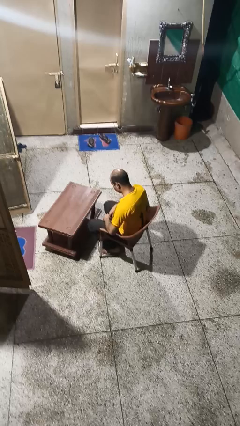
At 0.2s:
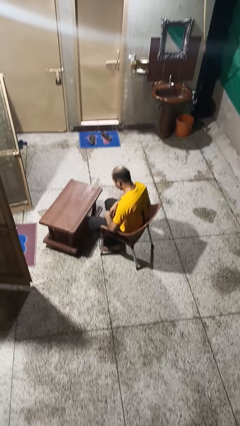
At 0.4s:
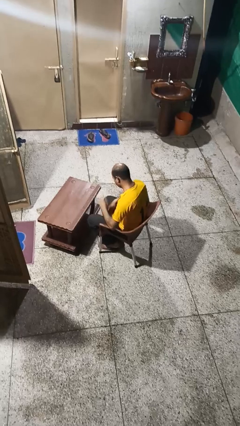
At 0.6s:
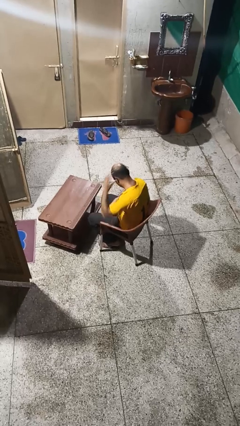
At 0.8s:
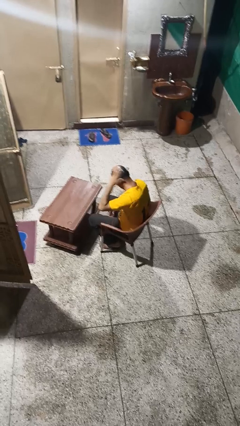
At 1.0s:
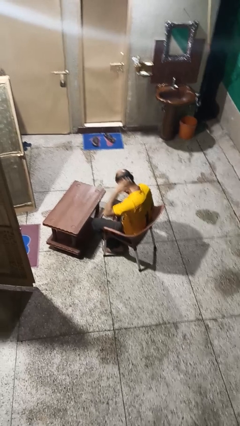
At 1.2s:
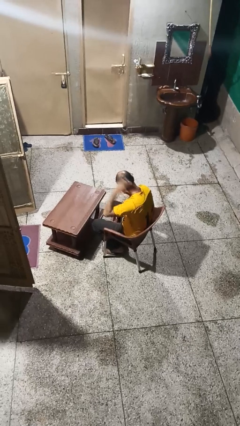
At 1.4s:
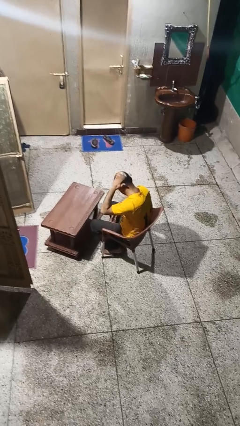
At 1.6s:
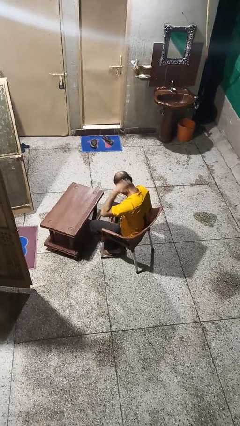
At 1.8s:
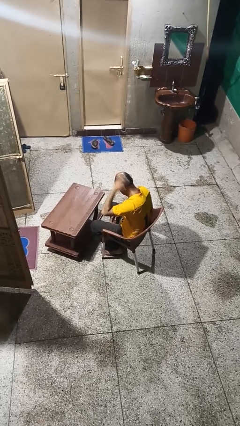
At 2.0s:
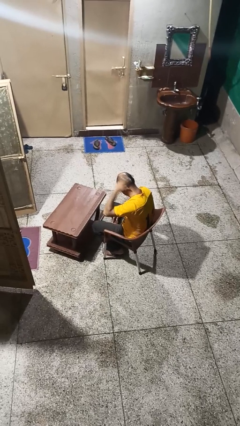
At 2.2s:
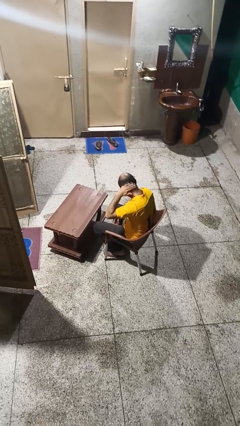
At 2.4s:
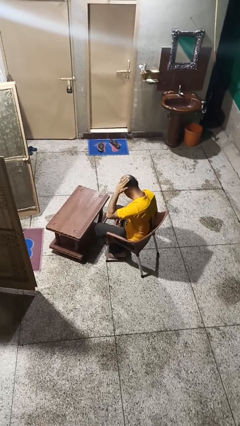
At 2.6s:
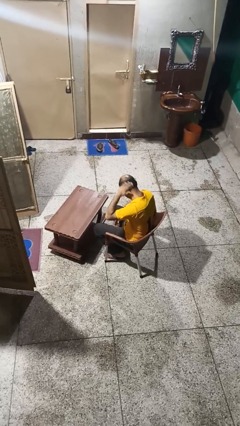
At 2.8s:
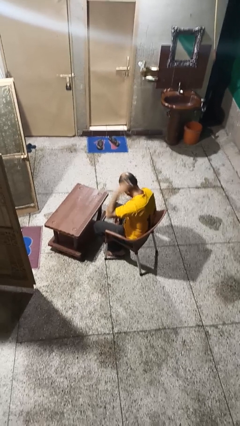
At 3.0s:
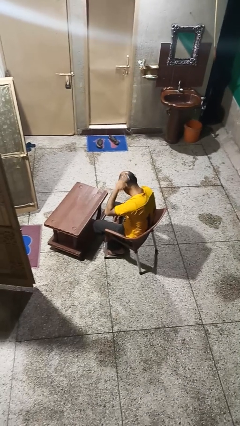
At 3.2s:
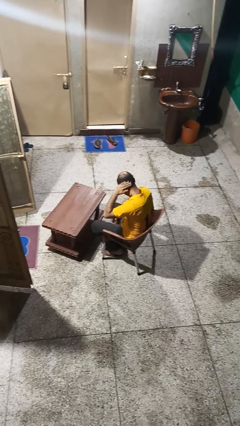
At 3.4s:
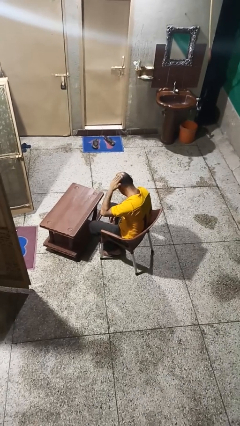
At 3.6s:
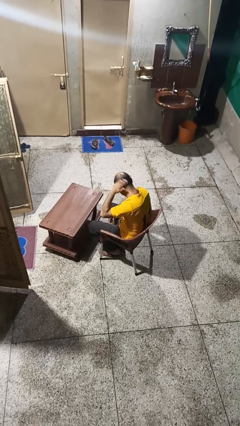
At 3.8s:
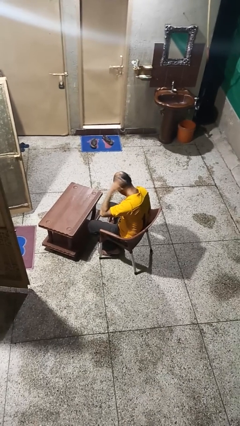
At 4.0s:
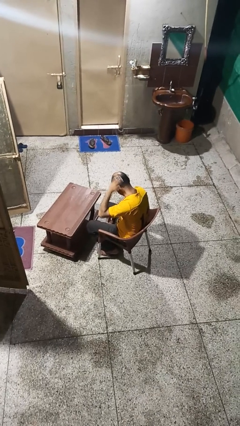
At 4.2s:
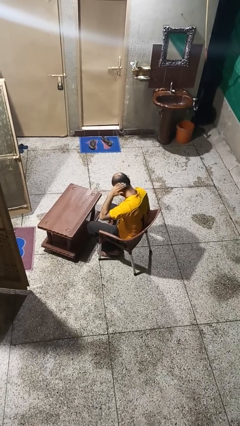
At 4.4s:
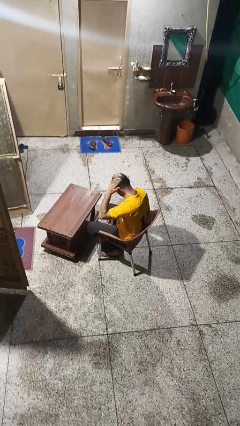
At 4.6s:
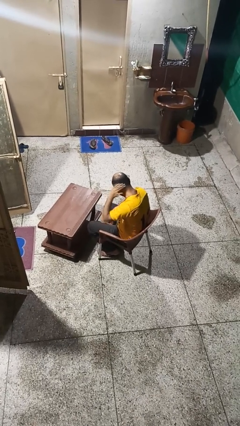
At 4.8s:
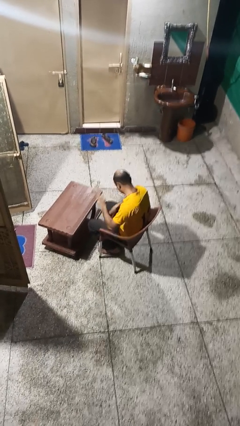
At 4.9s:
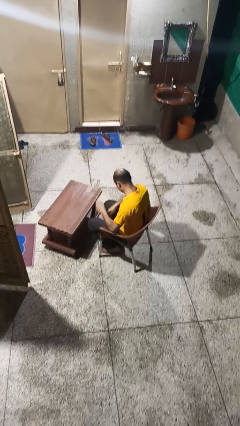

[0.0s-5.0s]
person strokes hair

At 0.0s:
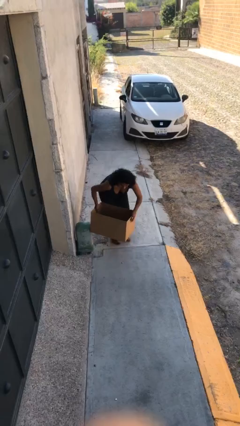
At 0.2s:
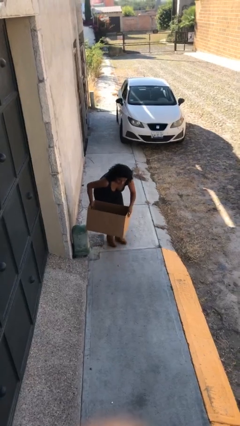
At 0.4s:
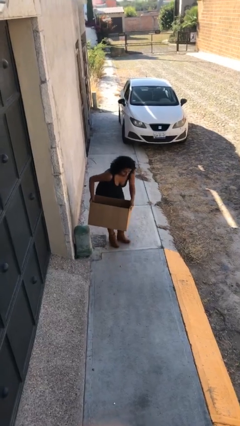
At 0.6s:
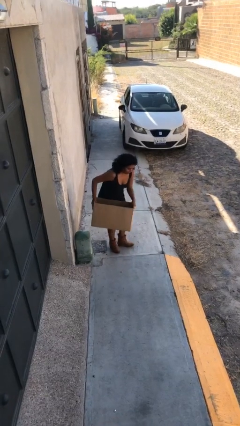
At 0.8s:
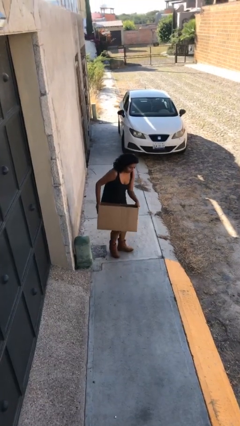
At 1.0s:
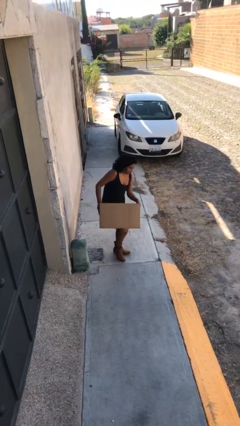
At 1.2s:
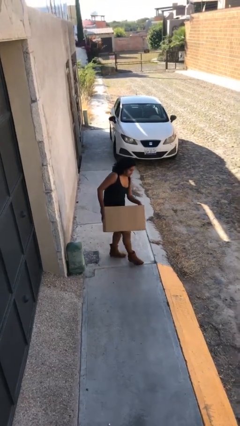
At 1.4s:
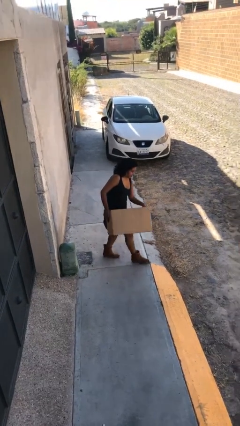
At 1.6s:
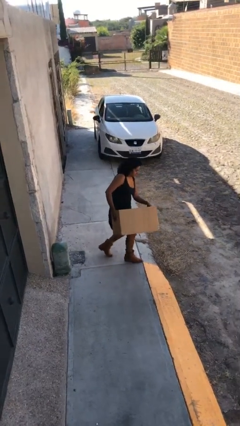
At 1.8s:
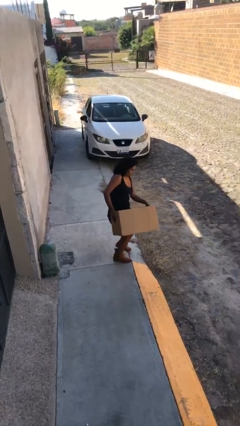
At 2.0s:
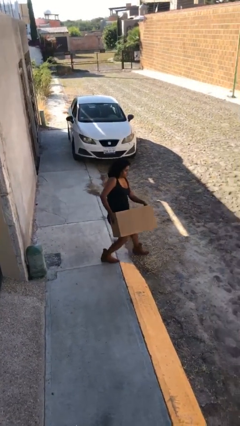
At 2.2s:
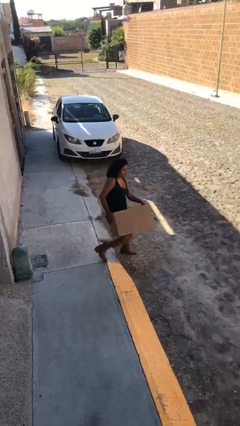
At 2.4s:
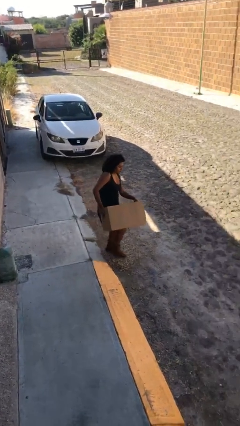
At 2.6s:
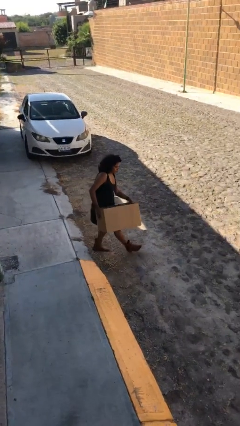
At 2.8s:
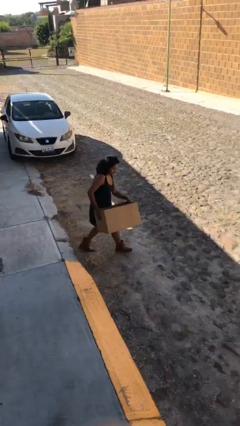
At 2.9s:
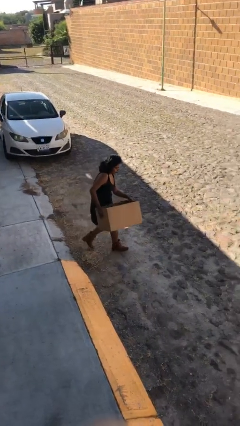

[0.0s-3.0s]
person carries heavy object

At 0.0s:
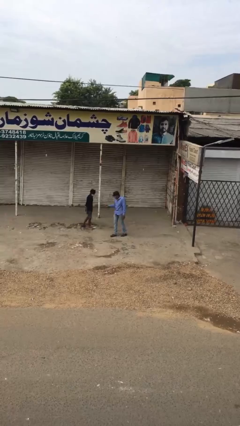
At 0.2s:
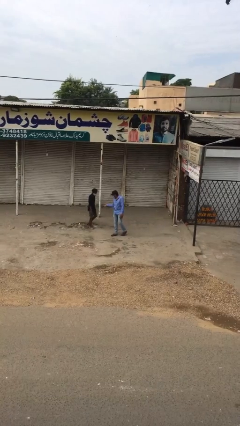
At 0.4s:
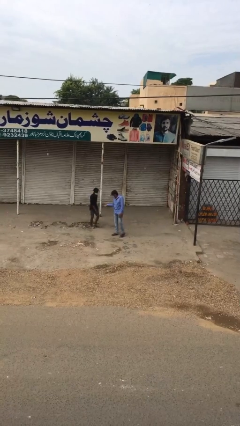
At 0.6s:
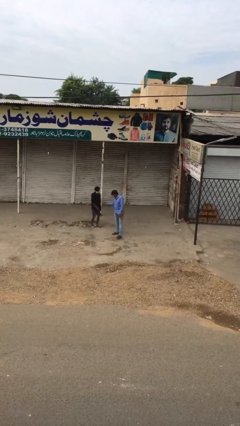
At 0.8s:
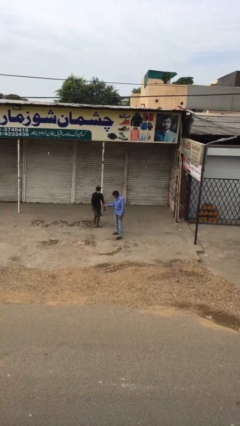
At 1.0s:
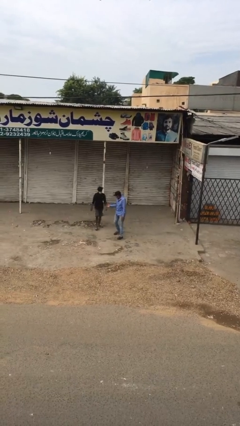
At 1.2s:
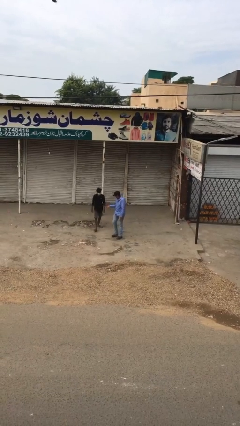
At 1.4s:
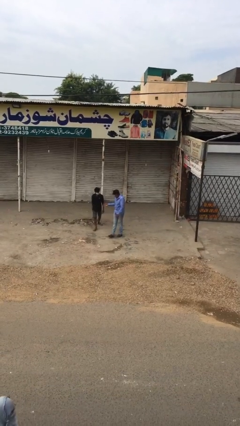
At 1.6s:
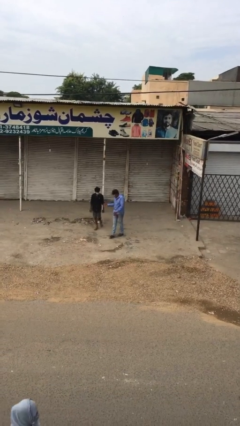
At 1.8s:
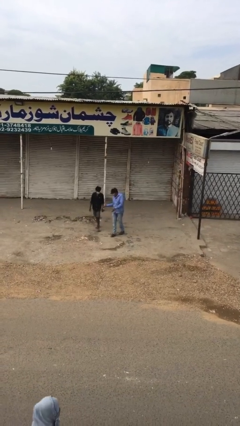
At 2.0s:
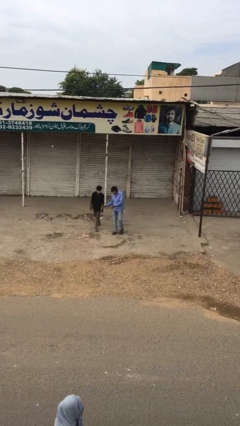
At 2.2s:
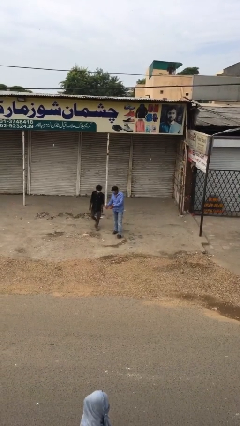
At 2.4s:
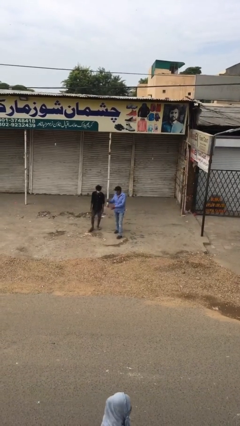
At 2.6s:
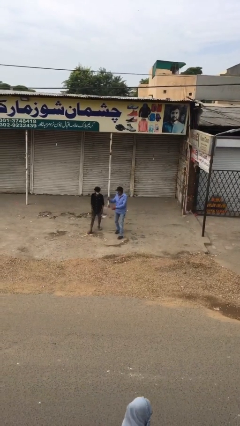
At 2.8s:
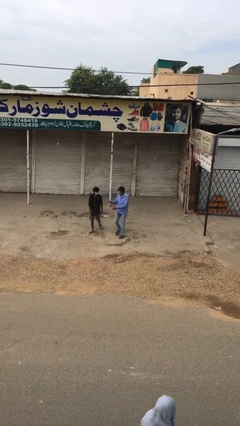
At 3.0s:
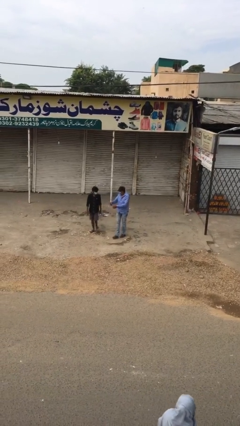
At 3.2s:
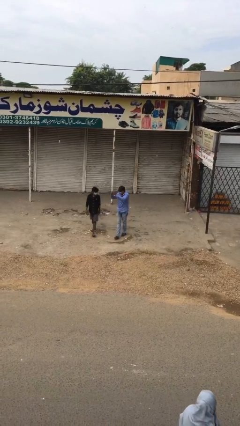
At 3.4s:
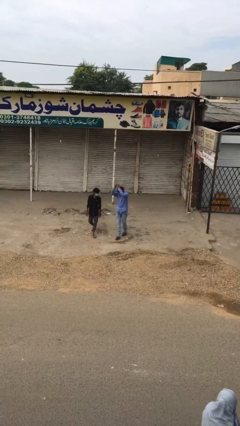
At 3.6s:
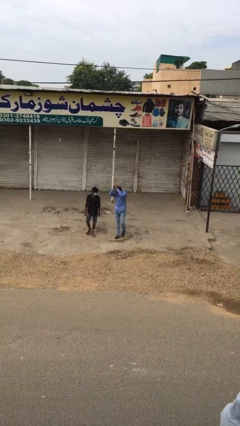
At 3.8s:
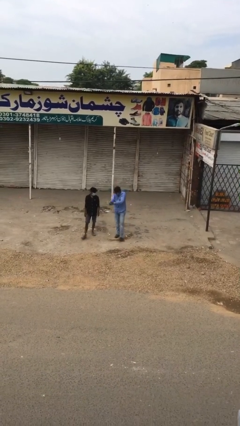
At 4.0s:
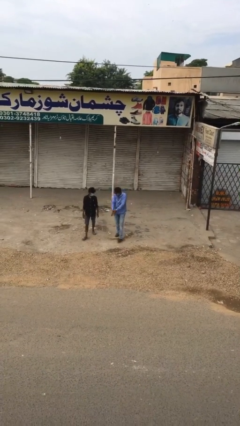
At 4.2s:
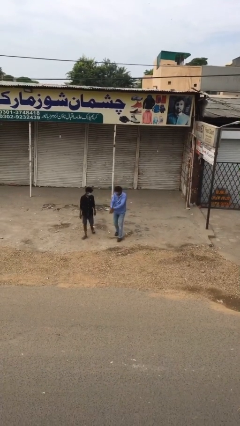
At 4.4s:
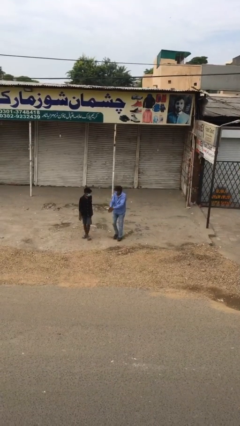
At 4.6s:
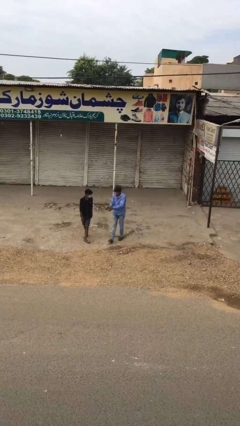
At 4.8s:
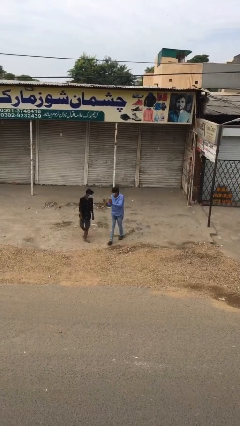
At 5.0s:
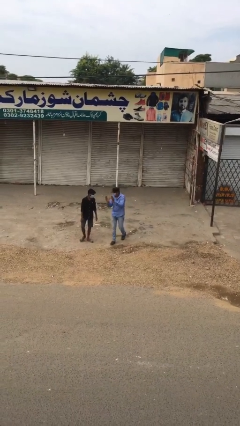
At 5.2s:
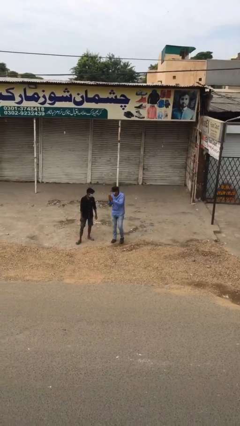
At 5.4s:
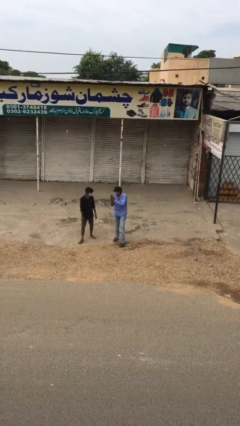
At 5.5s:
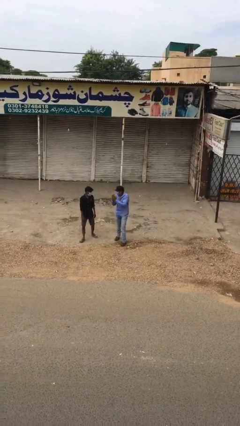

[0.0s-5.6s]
person talks to person

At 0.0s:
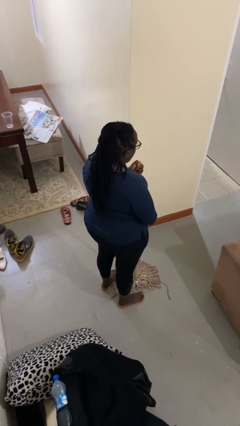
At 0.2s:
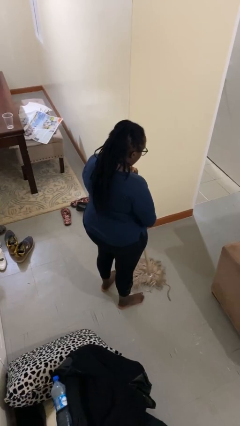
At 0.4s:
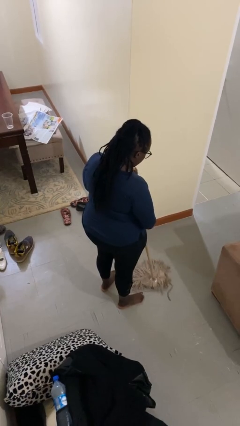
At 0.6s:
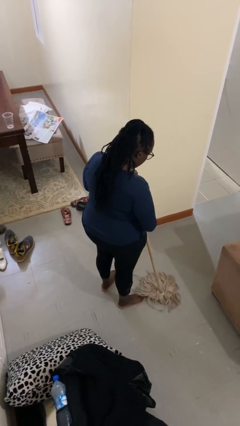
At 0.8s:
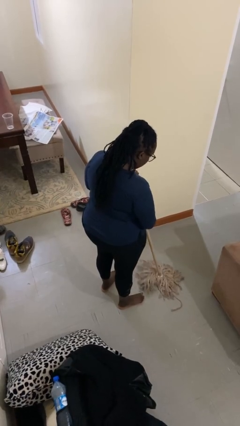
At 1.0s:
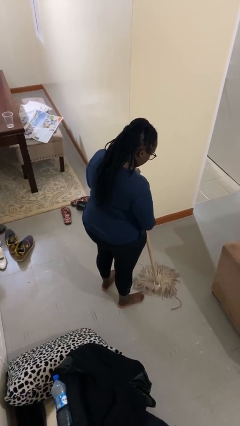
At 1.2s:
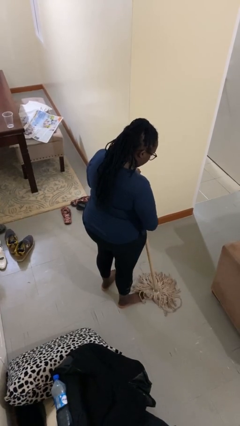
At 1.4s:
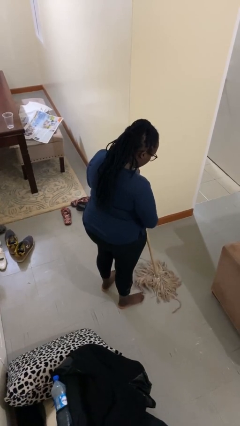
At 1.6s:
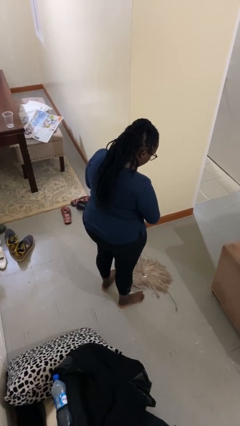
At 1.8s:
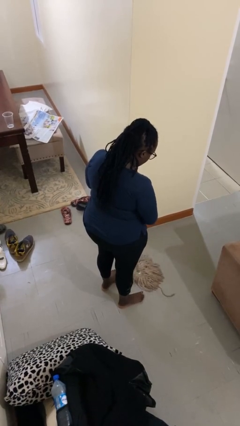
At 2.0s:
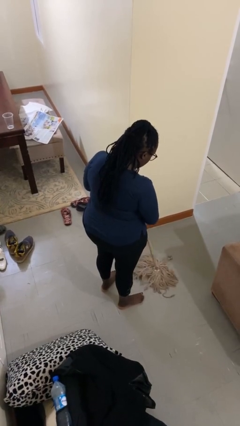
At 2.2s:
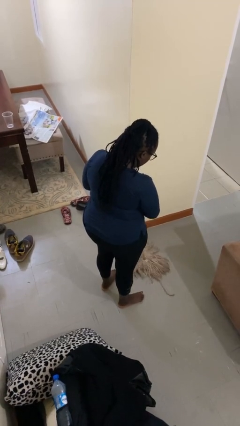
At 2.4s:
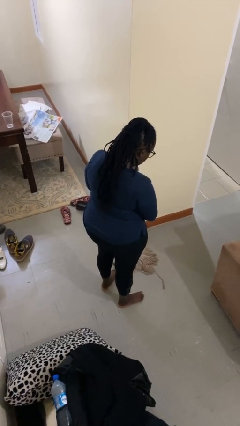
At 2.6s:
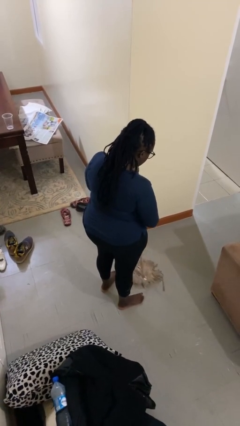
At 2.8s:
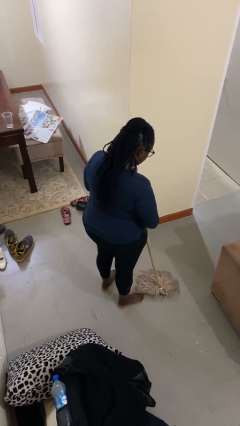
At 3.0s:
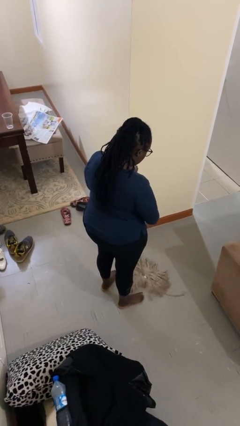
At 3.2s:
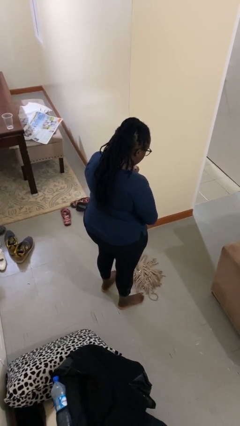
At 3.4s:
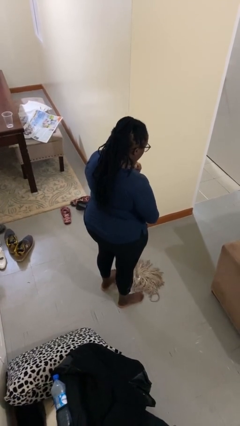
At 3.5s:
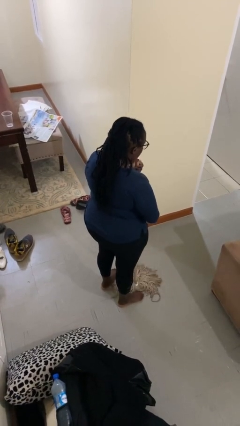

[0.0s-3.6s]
person mops

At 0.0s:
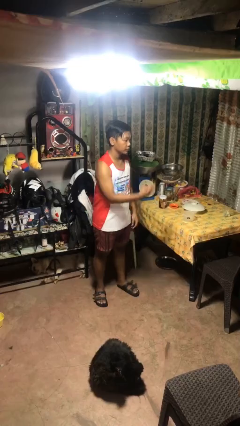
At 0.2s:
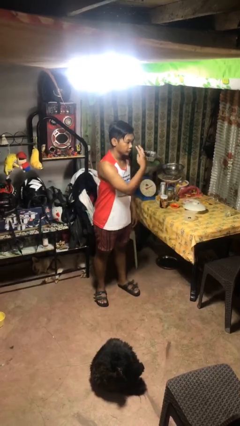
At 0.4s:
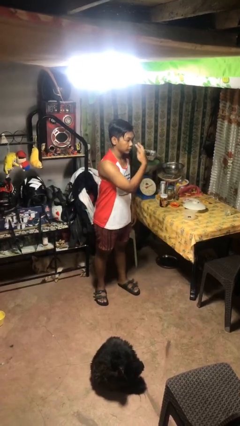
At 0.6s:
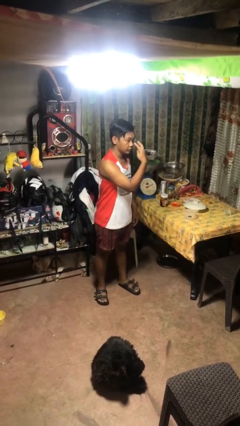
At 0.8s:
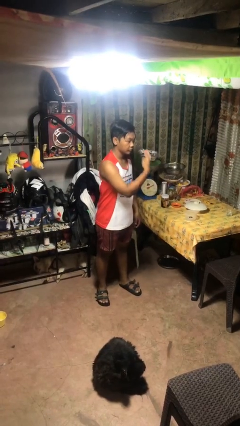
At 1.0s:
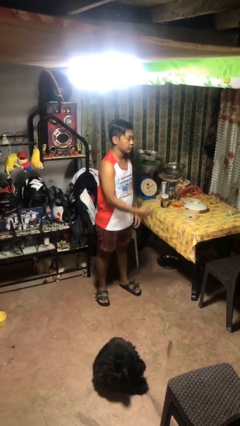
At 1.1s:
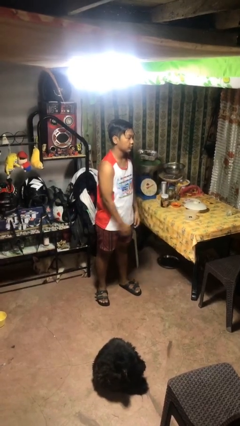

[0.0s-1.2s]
person gestures watch closely
